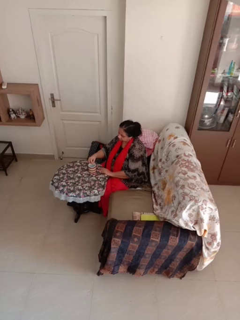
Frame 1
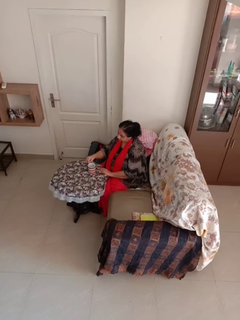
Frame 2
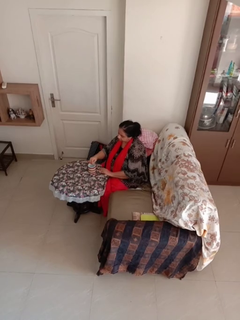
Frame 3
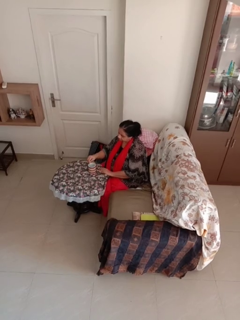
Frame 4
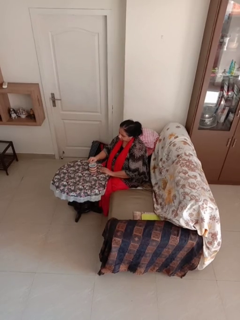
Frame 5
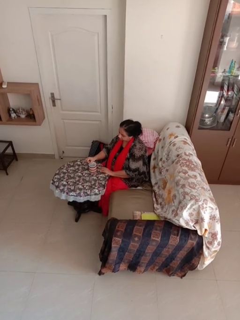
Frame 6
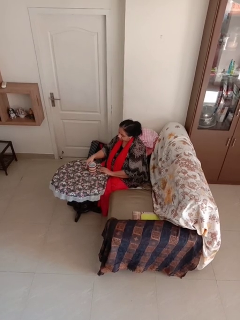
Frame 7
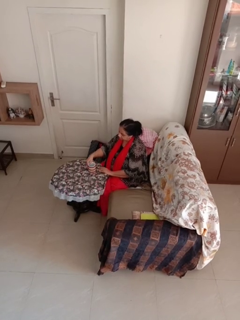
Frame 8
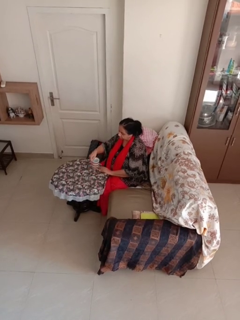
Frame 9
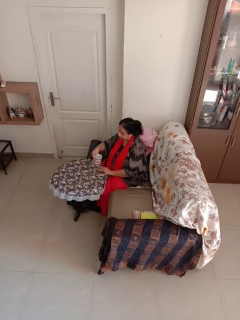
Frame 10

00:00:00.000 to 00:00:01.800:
person stirs mug

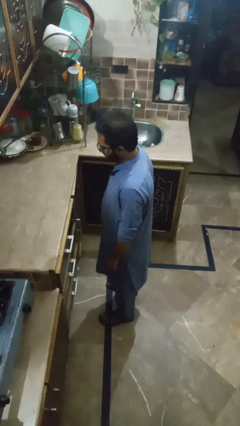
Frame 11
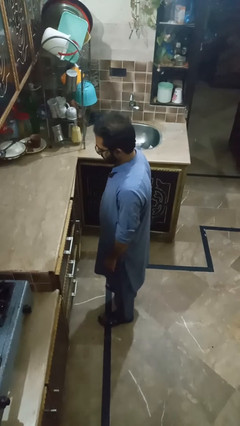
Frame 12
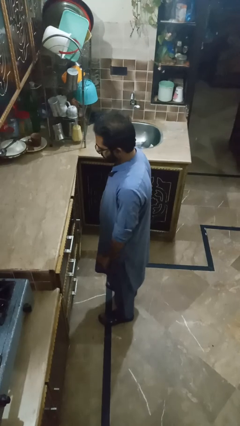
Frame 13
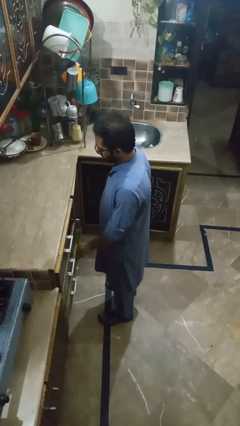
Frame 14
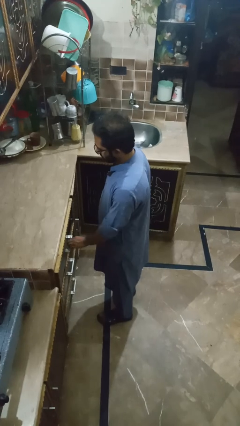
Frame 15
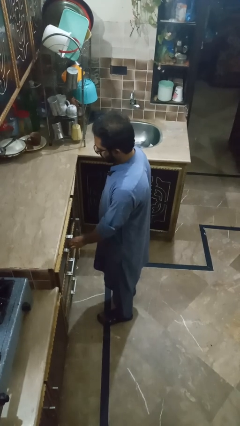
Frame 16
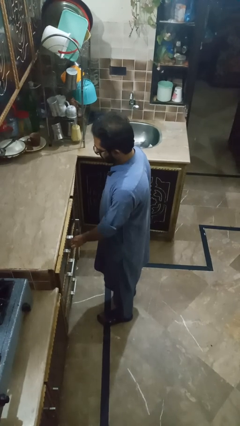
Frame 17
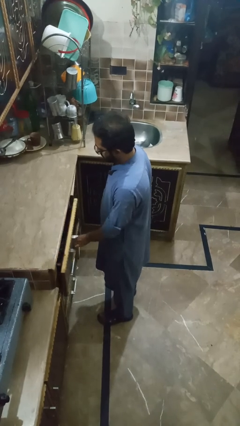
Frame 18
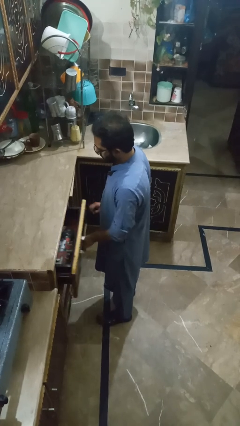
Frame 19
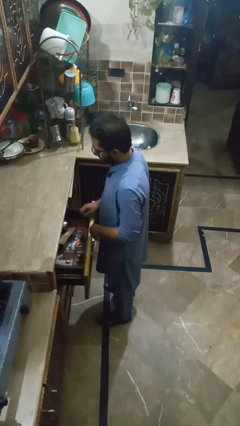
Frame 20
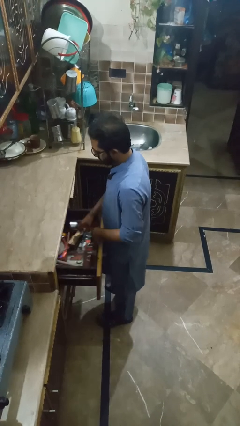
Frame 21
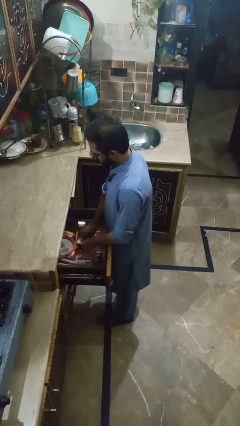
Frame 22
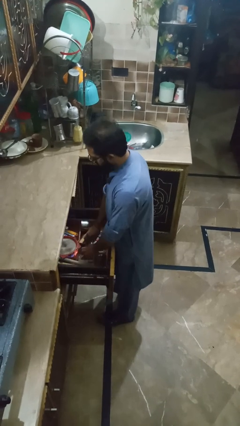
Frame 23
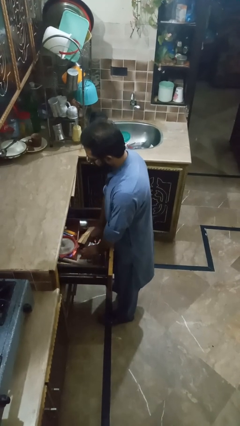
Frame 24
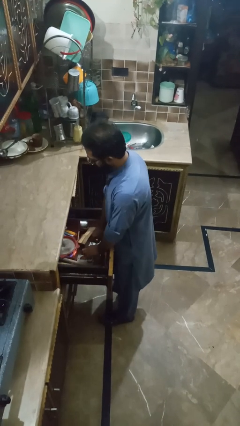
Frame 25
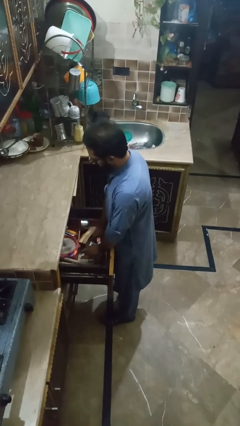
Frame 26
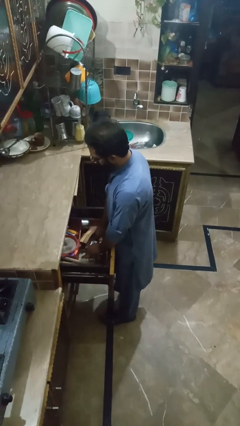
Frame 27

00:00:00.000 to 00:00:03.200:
person searches in kitchen drawer

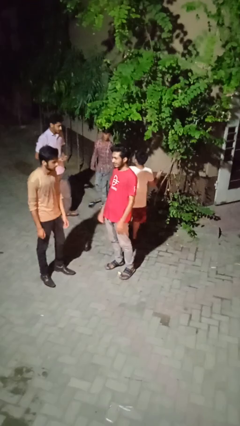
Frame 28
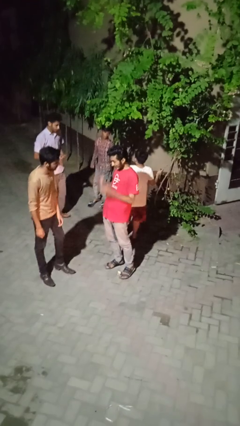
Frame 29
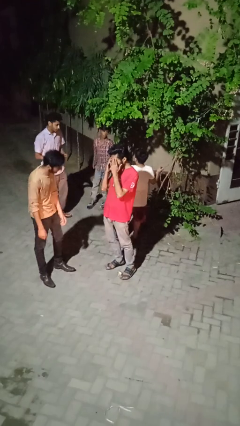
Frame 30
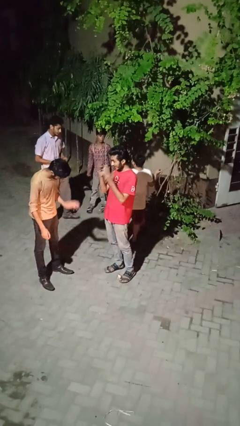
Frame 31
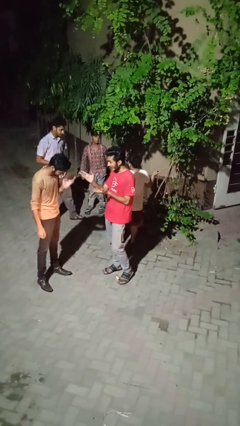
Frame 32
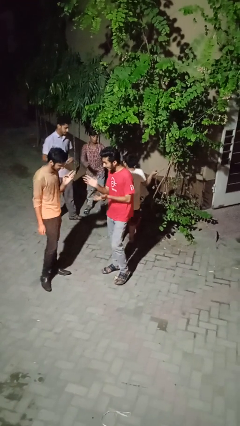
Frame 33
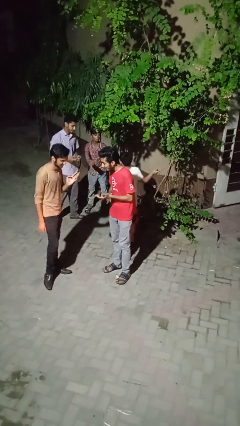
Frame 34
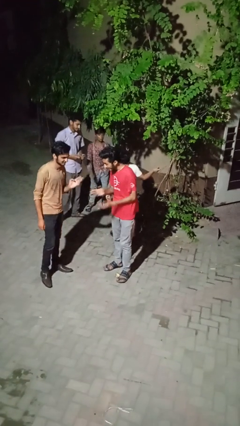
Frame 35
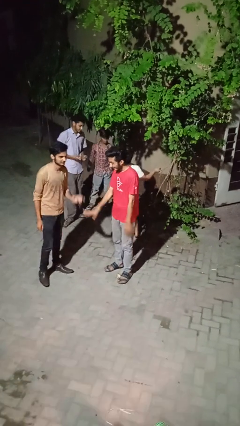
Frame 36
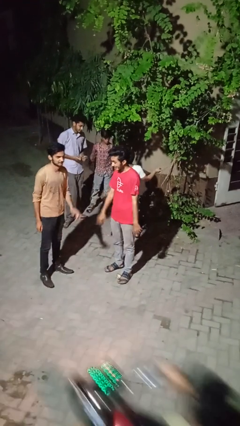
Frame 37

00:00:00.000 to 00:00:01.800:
person laughs with person

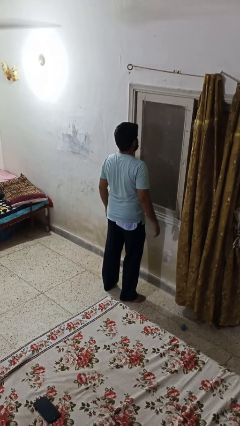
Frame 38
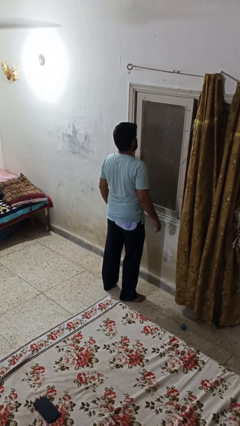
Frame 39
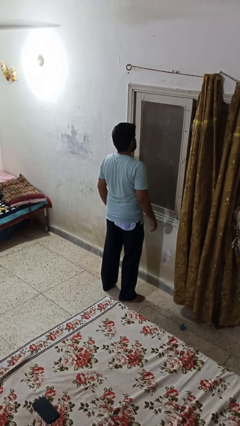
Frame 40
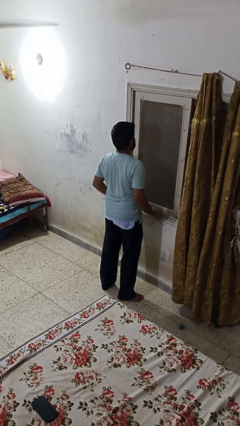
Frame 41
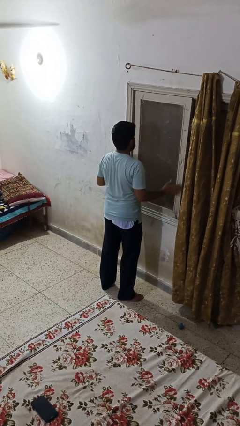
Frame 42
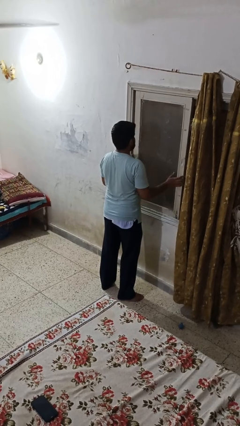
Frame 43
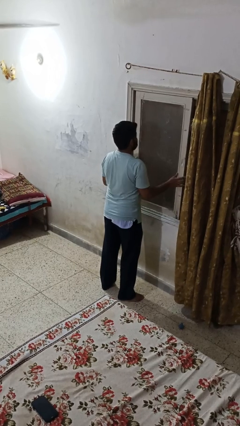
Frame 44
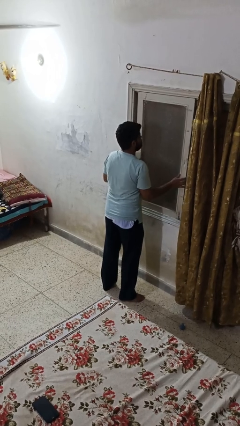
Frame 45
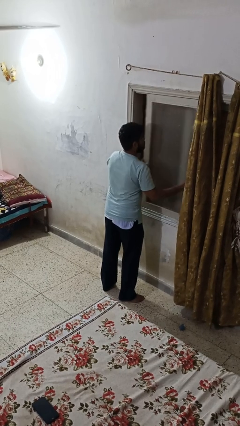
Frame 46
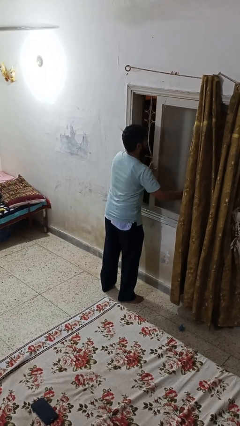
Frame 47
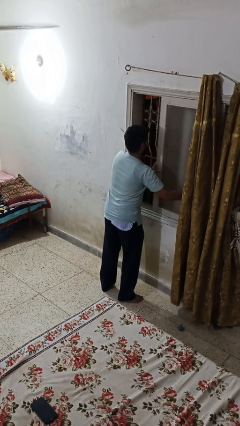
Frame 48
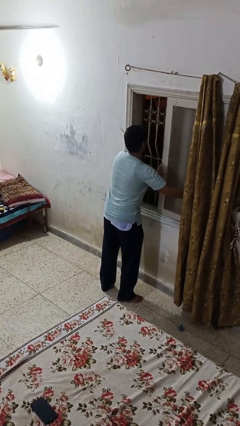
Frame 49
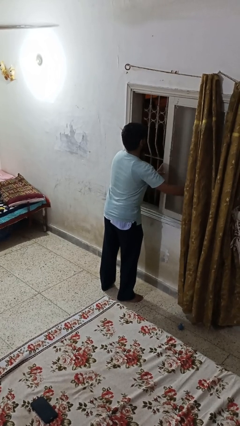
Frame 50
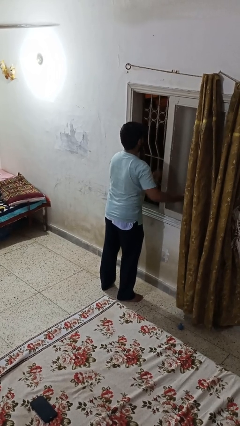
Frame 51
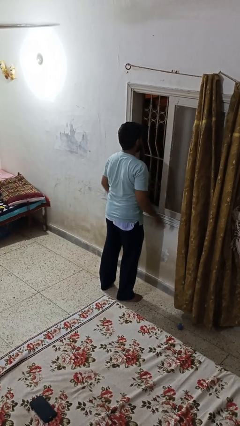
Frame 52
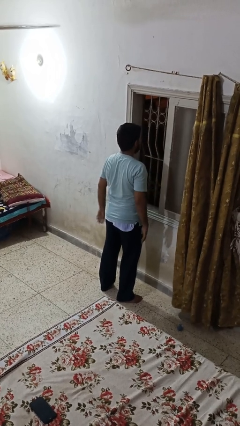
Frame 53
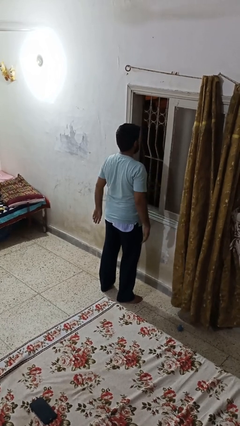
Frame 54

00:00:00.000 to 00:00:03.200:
person opens sliding door

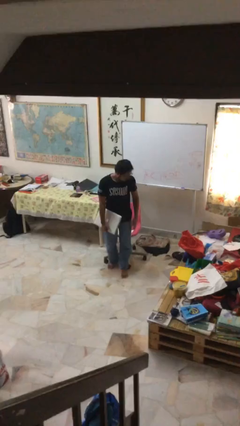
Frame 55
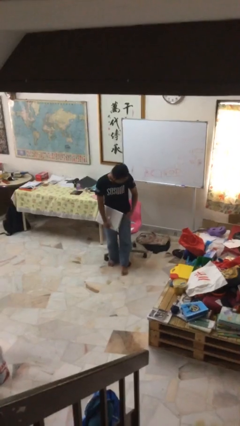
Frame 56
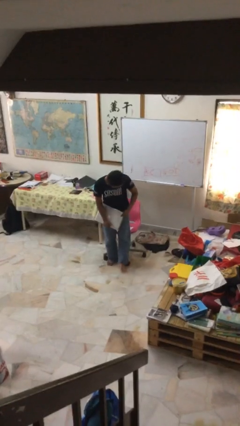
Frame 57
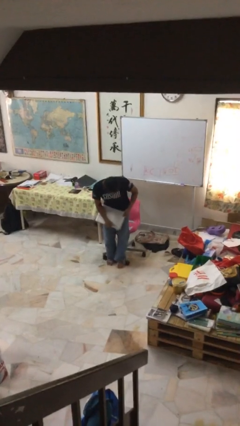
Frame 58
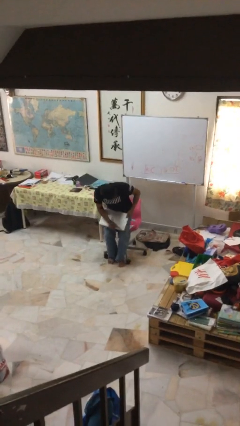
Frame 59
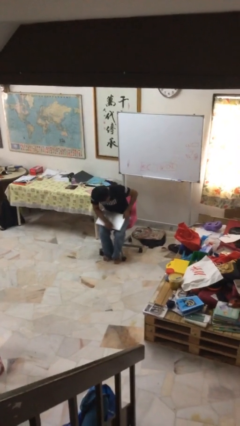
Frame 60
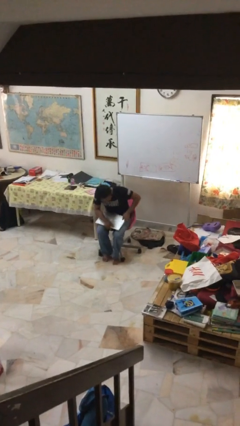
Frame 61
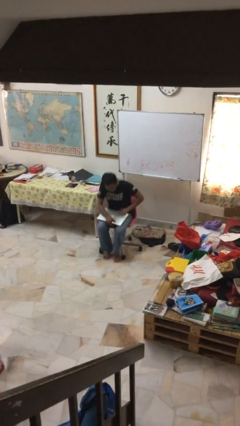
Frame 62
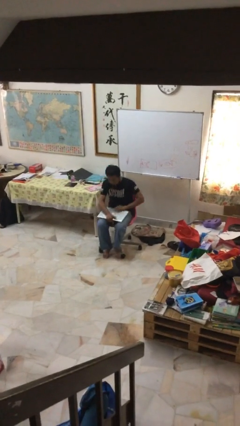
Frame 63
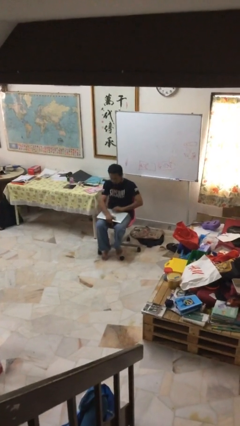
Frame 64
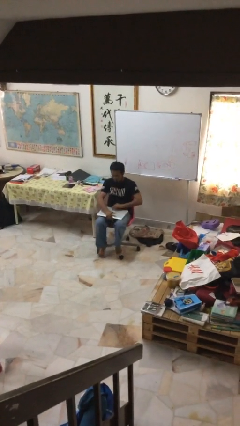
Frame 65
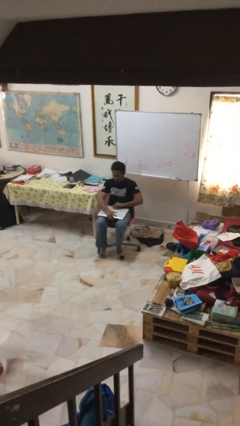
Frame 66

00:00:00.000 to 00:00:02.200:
person sits down

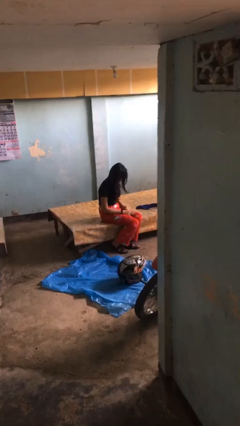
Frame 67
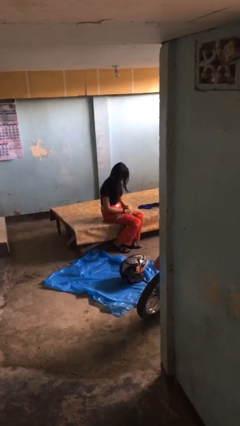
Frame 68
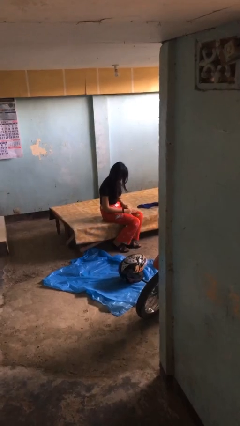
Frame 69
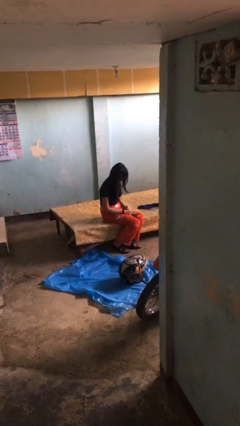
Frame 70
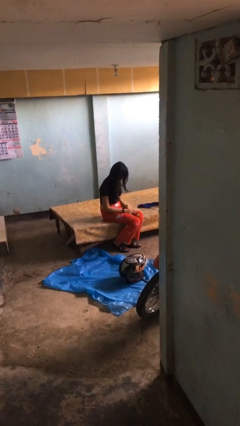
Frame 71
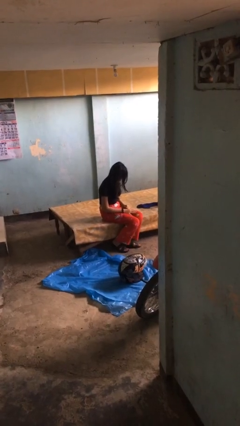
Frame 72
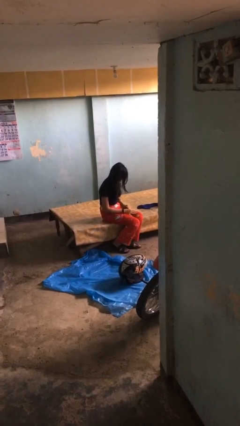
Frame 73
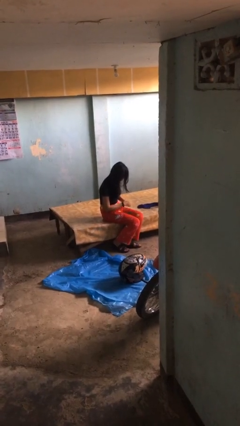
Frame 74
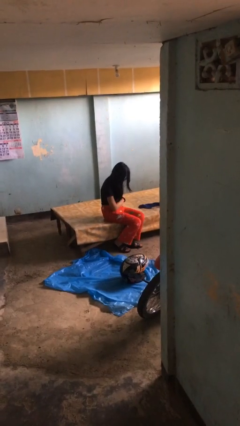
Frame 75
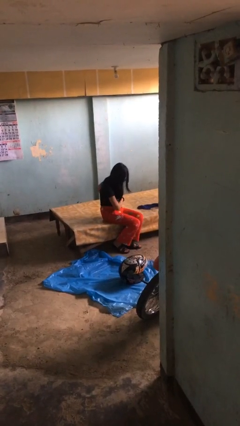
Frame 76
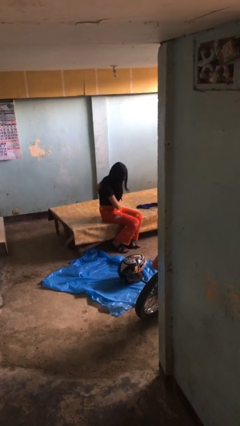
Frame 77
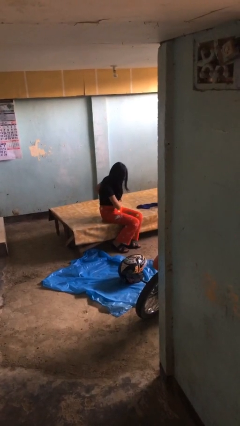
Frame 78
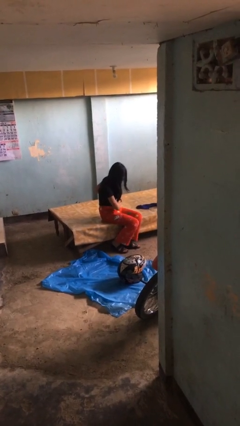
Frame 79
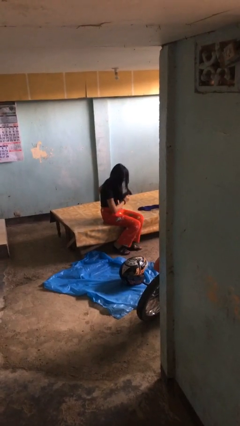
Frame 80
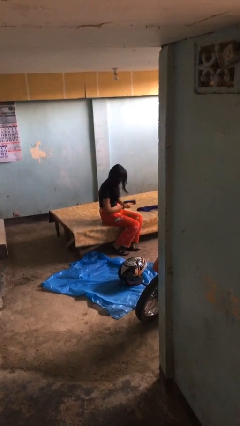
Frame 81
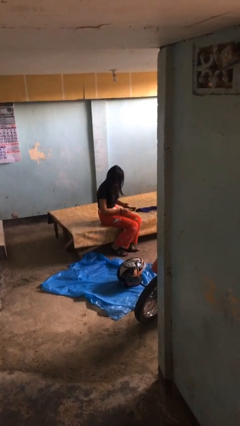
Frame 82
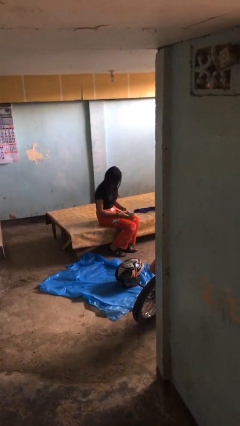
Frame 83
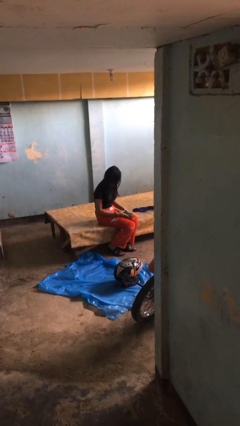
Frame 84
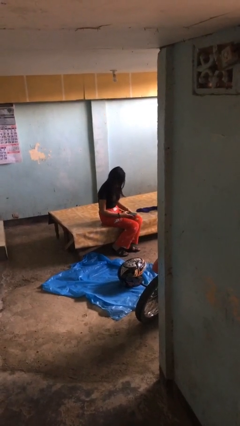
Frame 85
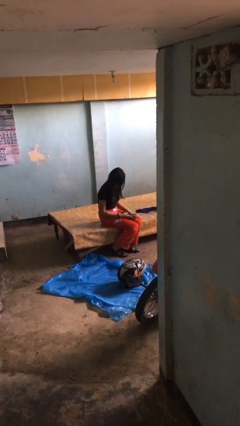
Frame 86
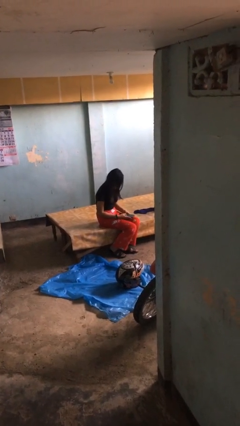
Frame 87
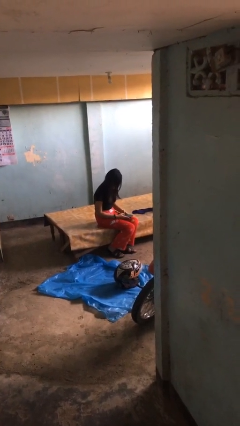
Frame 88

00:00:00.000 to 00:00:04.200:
person takes phone from pocket

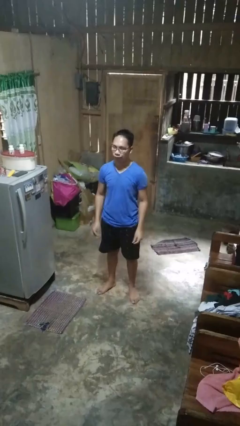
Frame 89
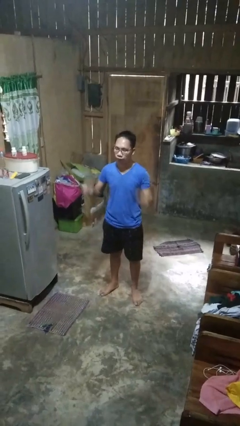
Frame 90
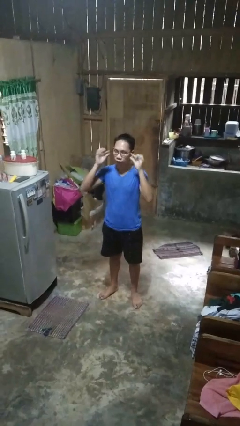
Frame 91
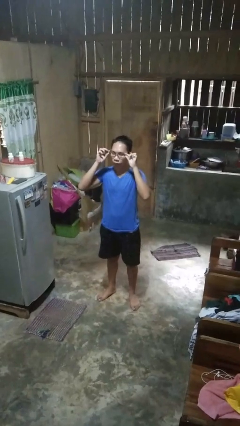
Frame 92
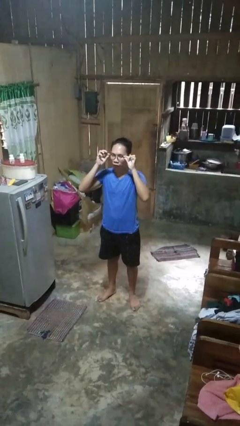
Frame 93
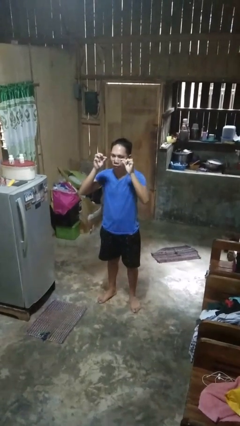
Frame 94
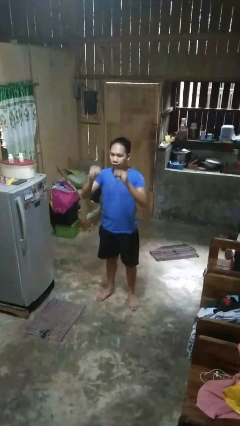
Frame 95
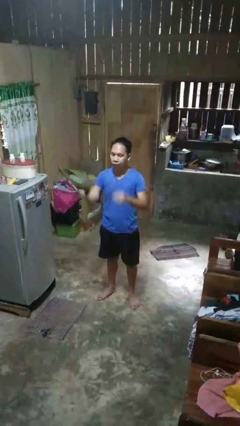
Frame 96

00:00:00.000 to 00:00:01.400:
person takes off glasses
